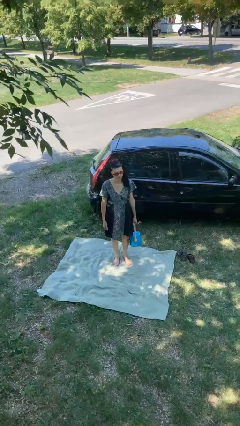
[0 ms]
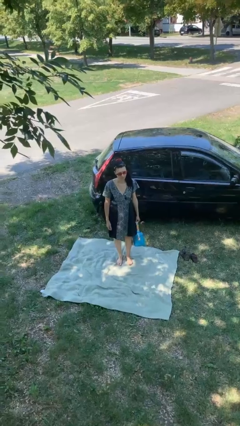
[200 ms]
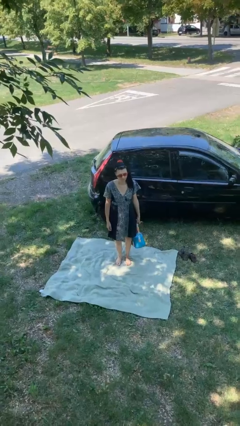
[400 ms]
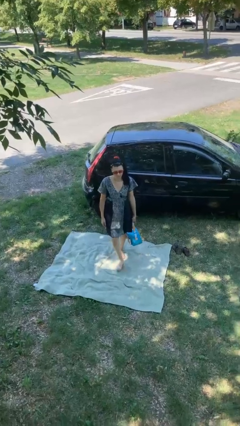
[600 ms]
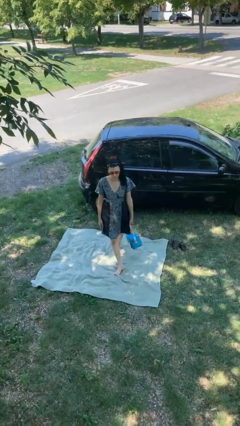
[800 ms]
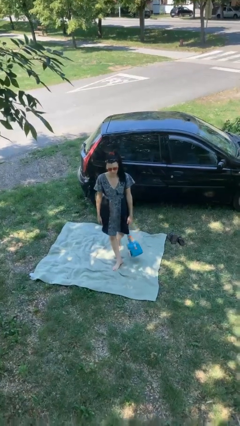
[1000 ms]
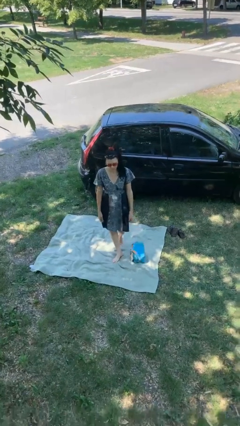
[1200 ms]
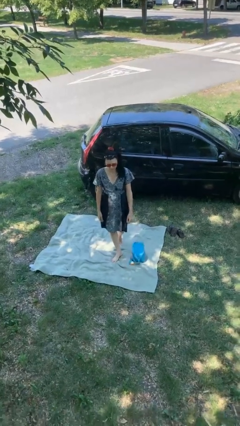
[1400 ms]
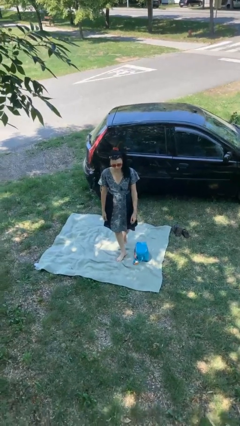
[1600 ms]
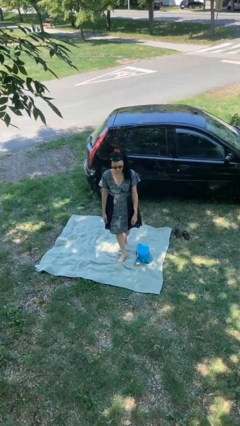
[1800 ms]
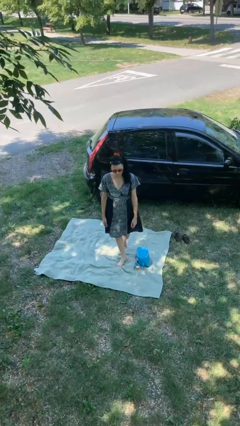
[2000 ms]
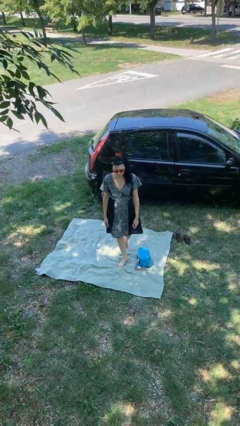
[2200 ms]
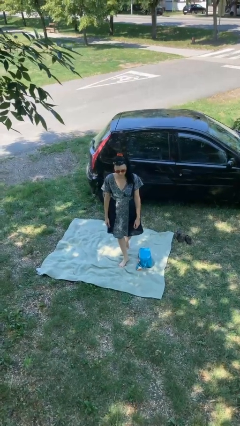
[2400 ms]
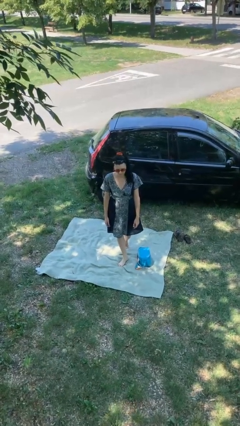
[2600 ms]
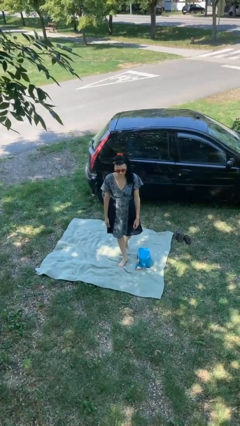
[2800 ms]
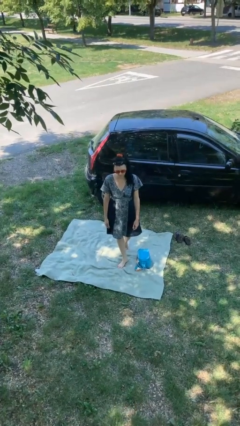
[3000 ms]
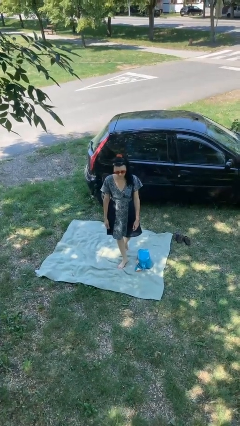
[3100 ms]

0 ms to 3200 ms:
person drops object

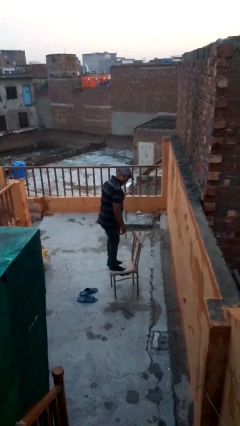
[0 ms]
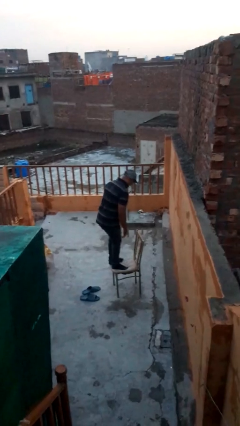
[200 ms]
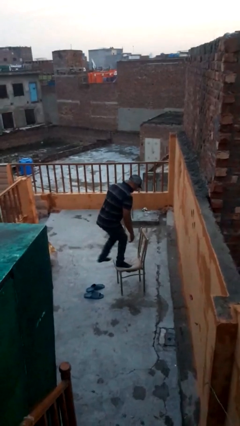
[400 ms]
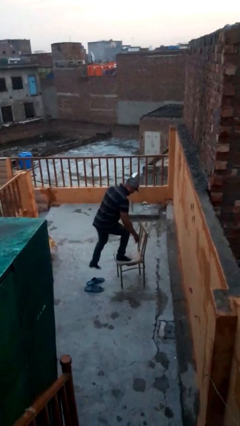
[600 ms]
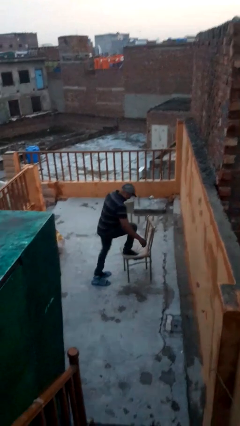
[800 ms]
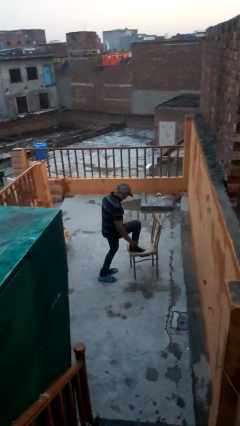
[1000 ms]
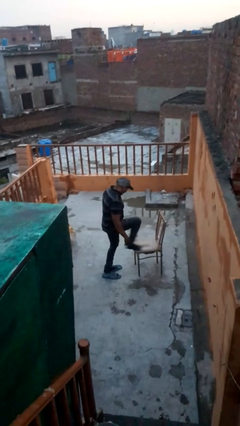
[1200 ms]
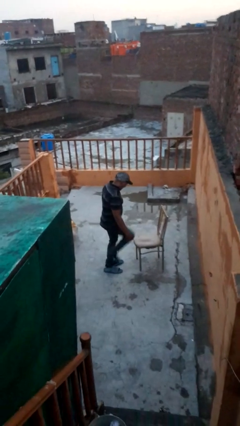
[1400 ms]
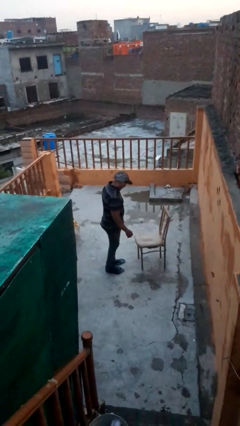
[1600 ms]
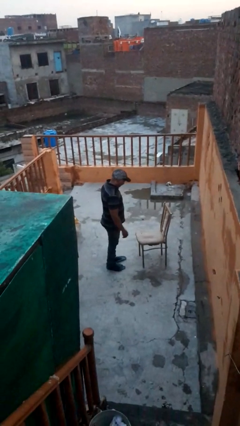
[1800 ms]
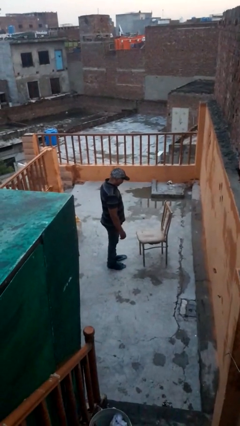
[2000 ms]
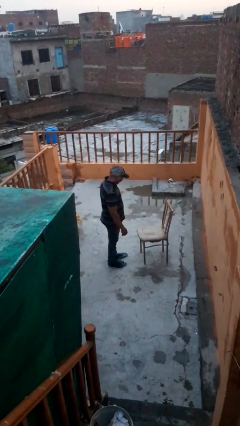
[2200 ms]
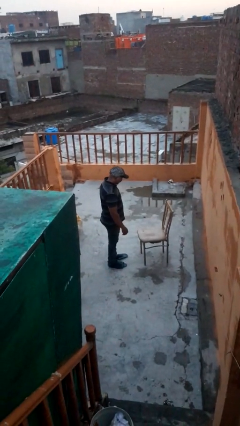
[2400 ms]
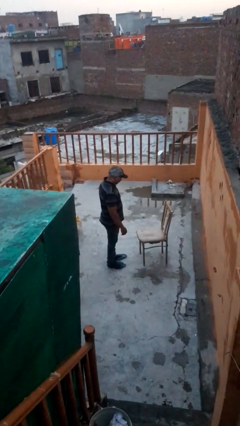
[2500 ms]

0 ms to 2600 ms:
person climbs off chair

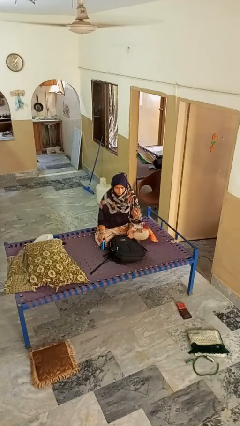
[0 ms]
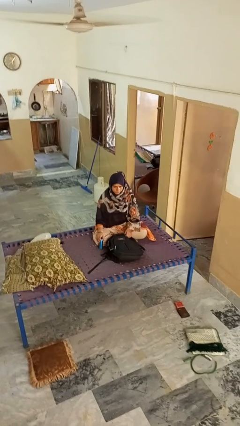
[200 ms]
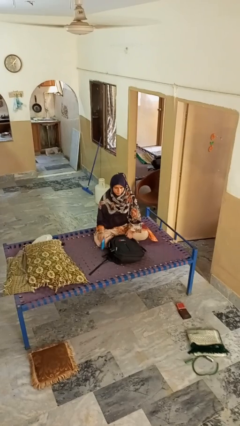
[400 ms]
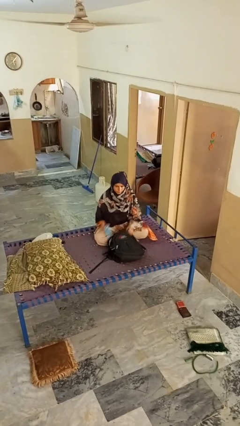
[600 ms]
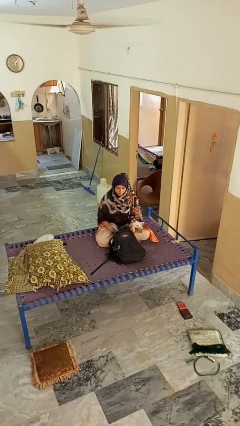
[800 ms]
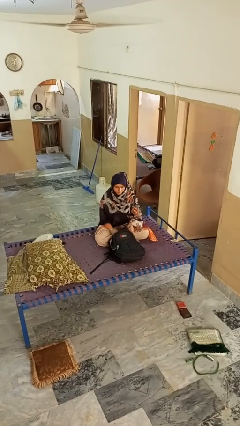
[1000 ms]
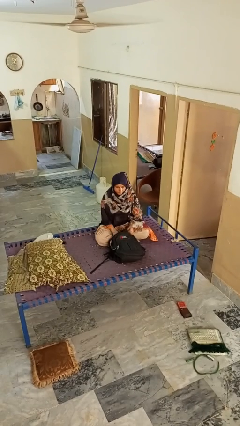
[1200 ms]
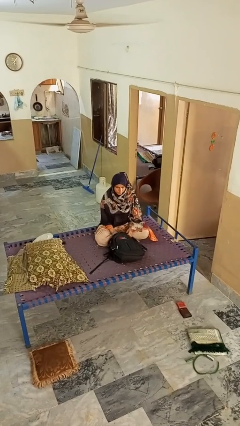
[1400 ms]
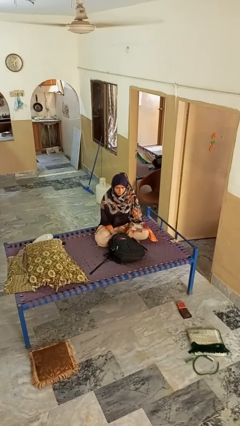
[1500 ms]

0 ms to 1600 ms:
person puts object into bag

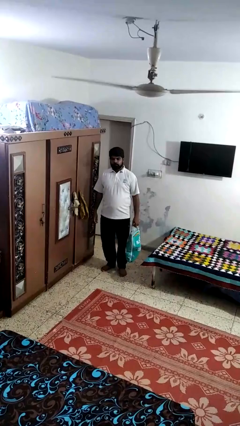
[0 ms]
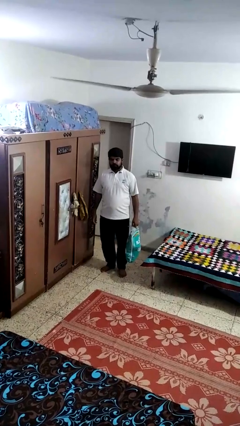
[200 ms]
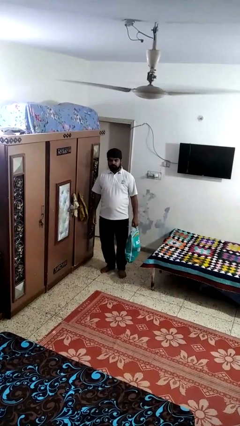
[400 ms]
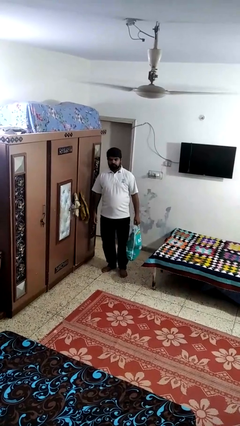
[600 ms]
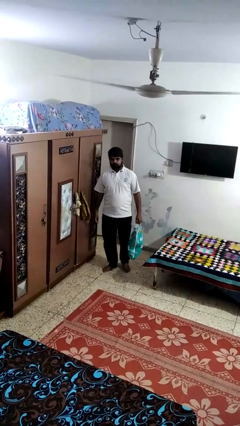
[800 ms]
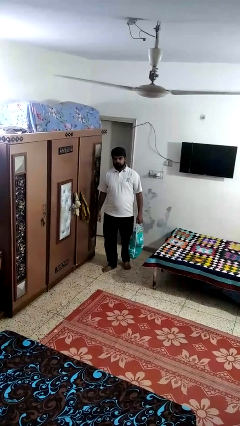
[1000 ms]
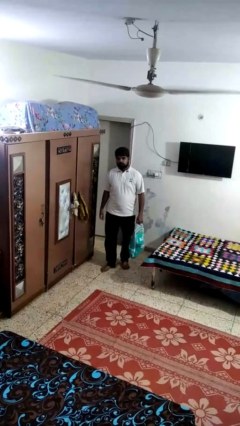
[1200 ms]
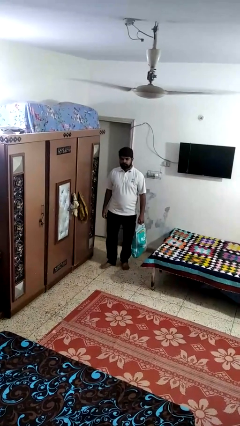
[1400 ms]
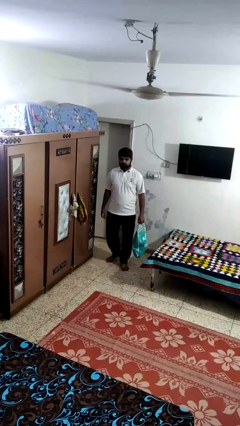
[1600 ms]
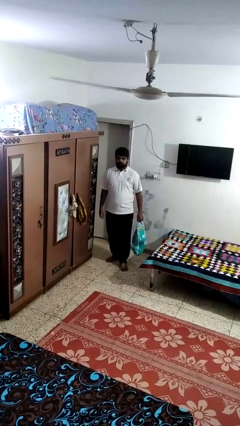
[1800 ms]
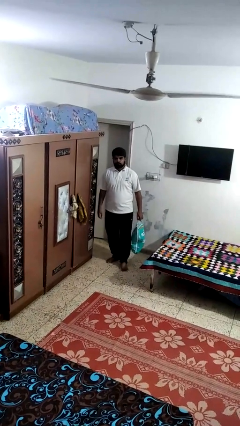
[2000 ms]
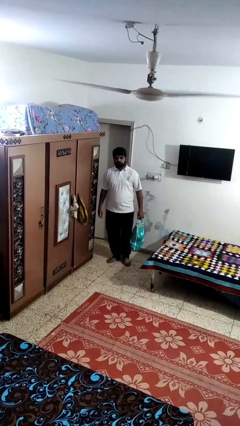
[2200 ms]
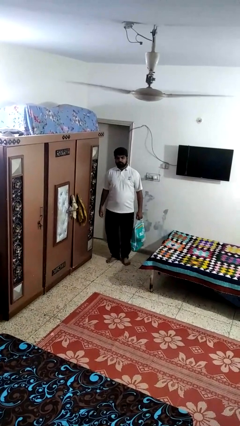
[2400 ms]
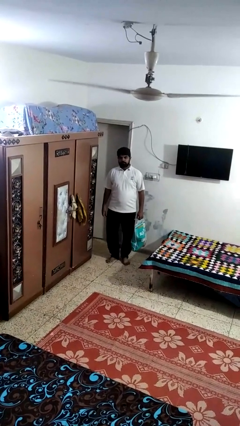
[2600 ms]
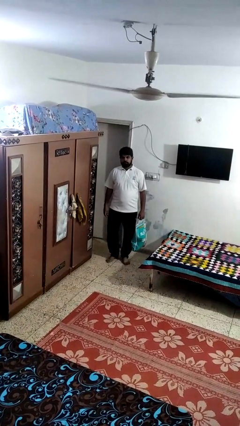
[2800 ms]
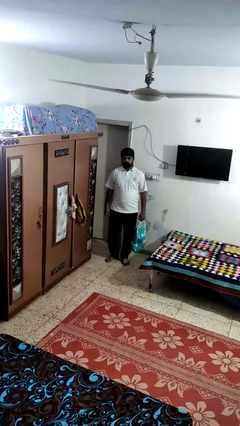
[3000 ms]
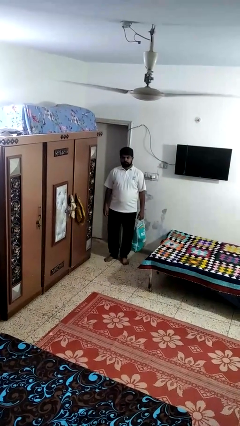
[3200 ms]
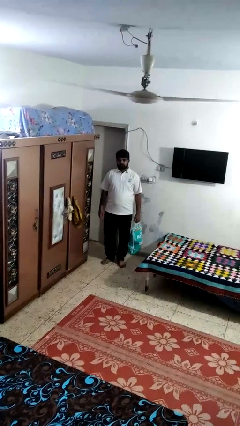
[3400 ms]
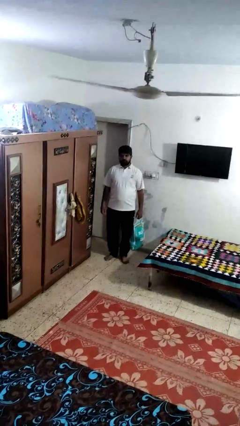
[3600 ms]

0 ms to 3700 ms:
person carries groceries

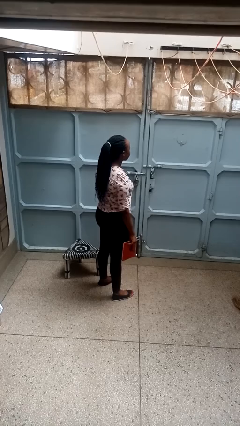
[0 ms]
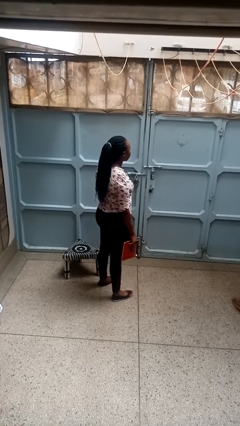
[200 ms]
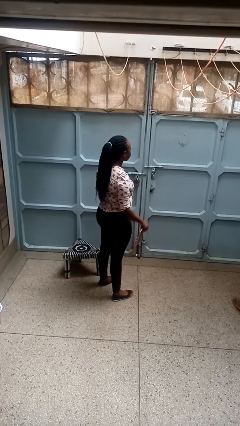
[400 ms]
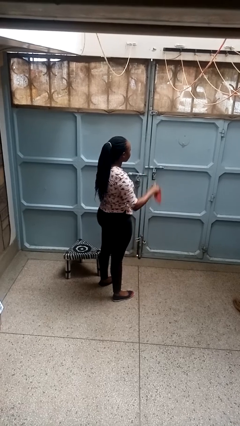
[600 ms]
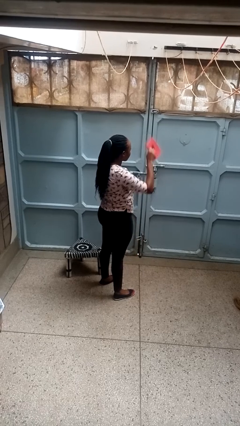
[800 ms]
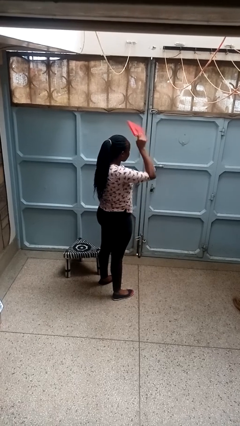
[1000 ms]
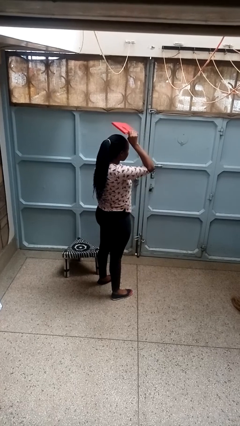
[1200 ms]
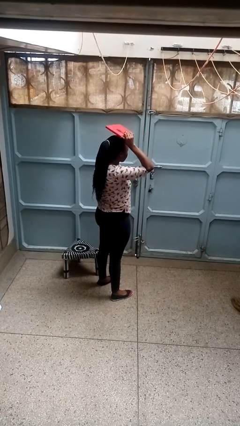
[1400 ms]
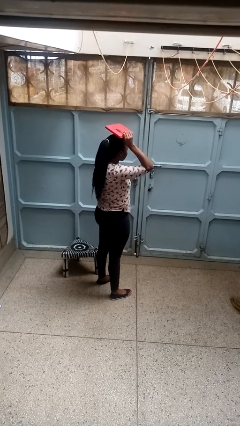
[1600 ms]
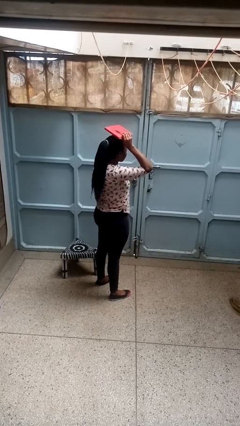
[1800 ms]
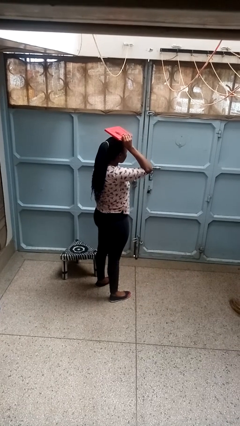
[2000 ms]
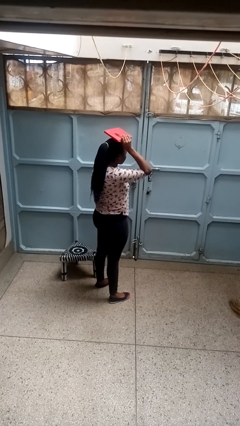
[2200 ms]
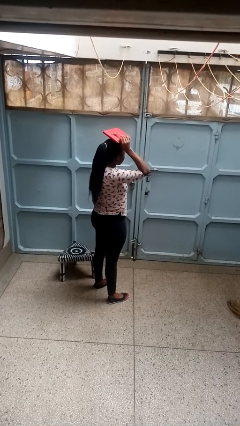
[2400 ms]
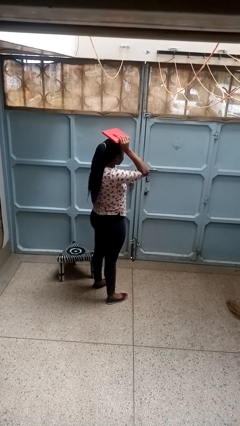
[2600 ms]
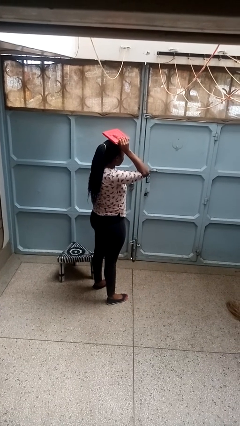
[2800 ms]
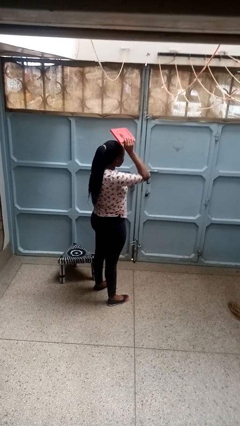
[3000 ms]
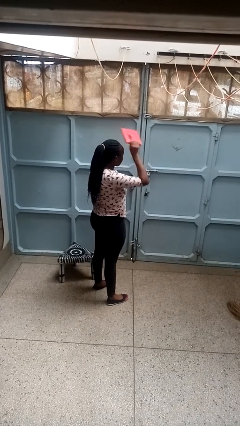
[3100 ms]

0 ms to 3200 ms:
person holds object above head

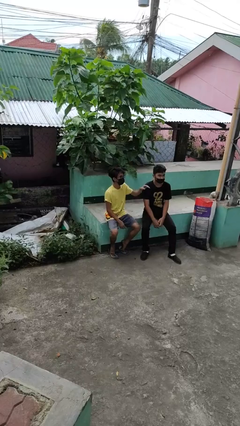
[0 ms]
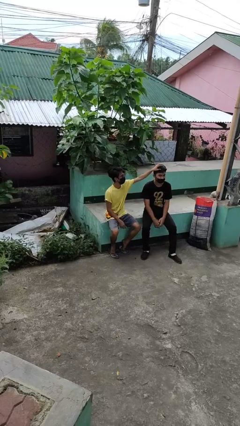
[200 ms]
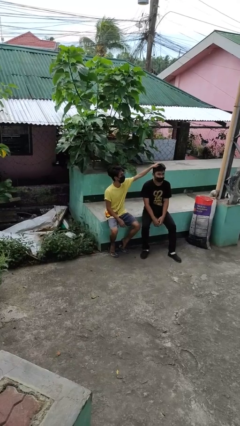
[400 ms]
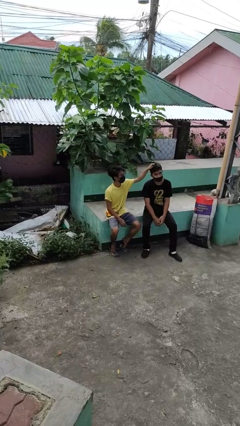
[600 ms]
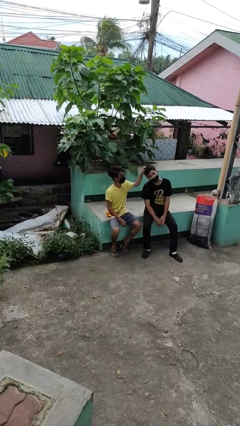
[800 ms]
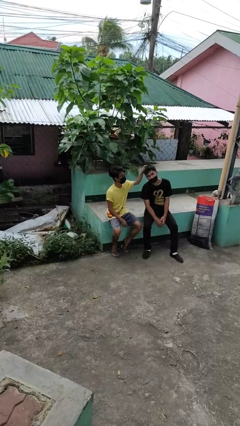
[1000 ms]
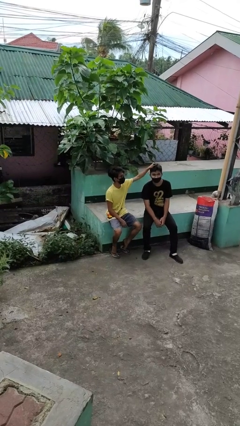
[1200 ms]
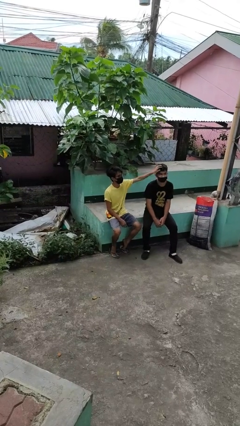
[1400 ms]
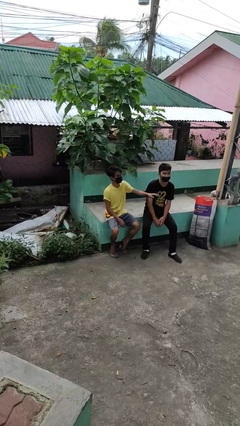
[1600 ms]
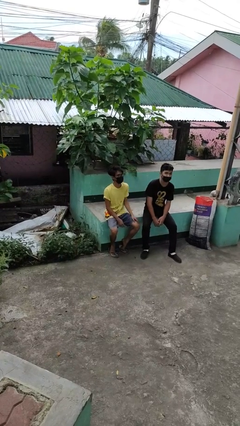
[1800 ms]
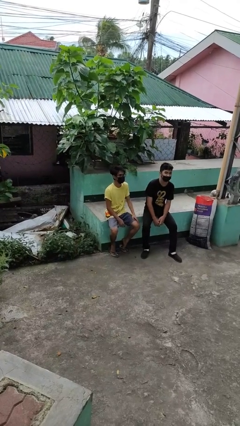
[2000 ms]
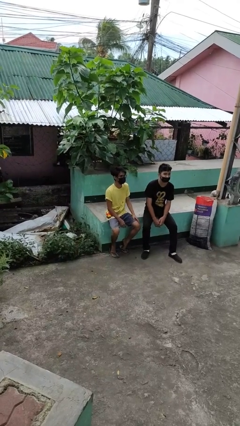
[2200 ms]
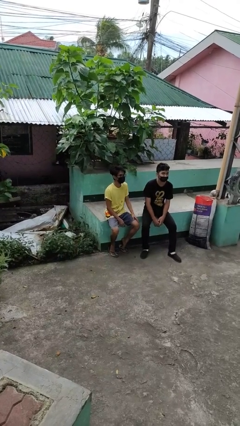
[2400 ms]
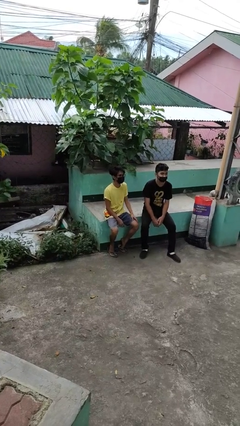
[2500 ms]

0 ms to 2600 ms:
person grabs person by hair

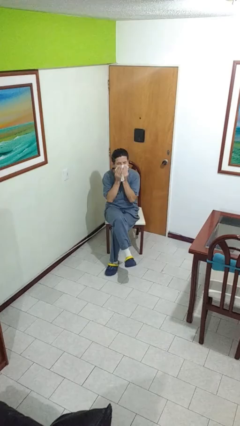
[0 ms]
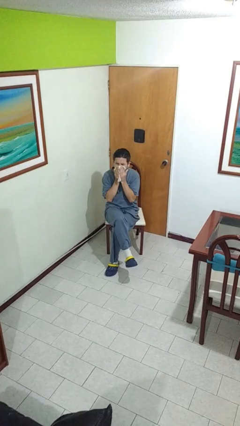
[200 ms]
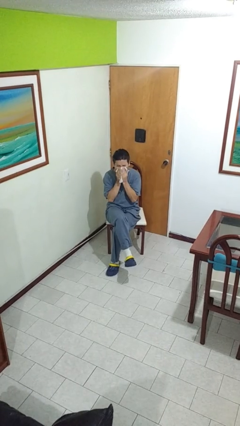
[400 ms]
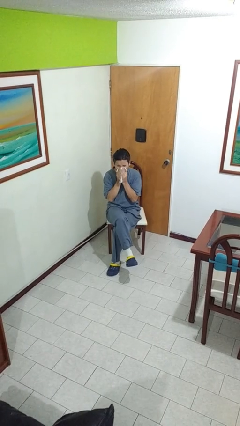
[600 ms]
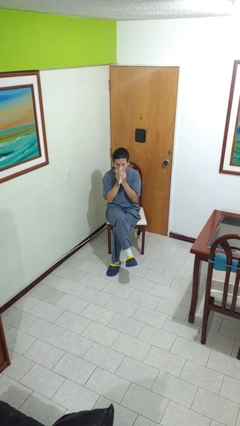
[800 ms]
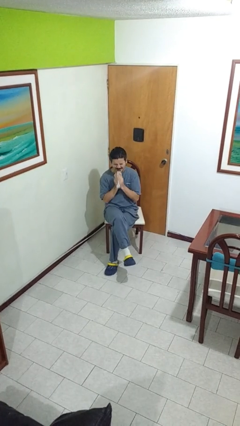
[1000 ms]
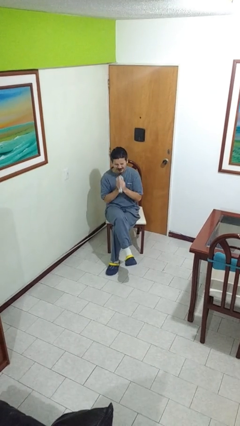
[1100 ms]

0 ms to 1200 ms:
person blows nose
